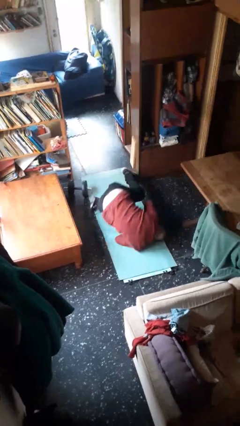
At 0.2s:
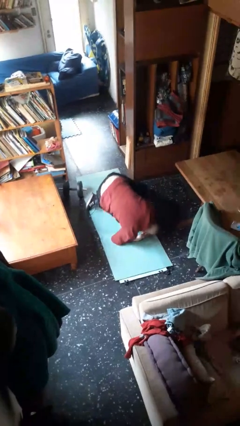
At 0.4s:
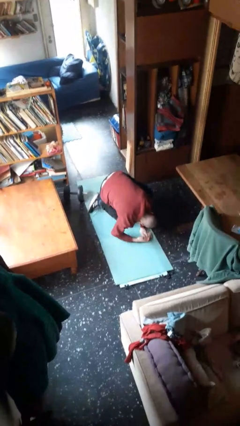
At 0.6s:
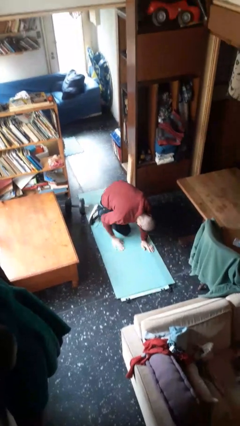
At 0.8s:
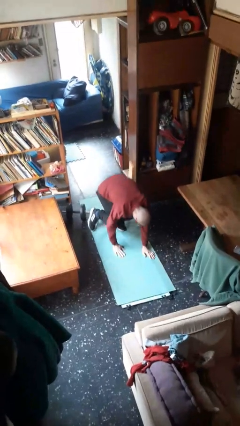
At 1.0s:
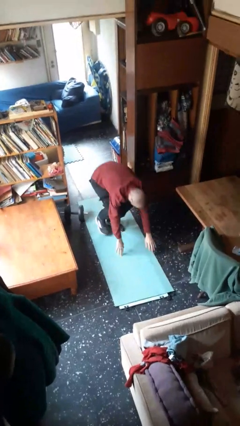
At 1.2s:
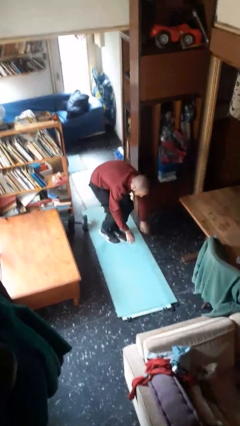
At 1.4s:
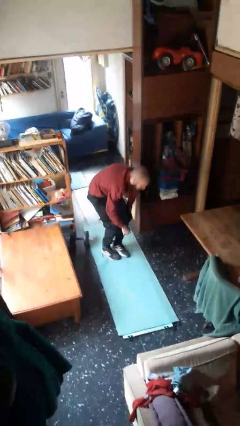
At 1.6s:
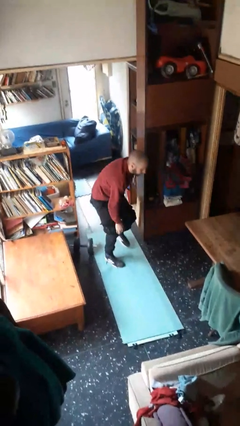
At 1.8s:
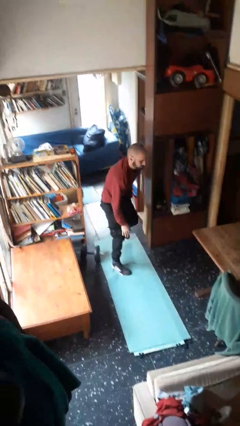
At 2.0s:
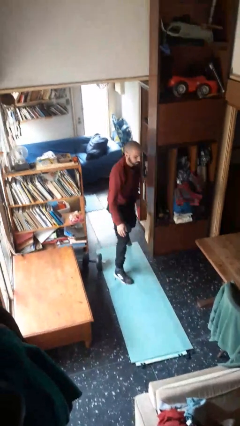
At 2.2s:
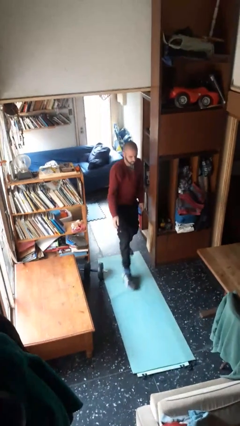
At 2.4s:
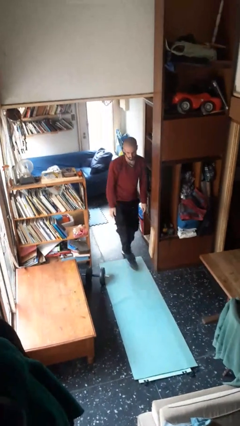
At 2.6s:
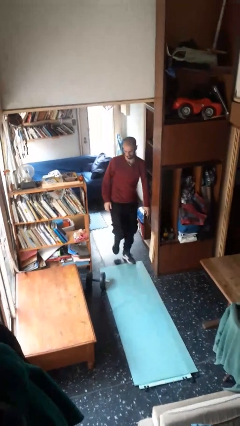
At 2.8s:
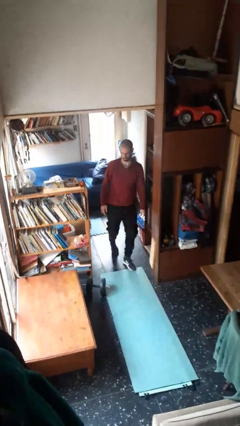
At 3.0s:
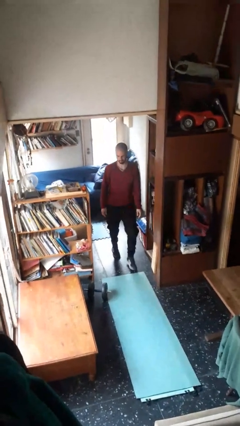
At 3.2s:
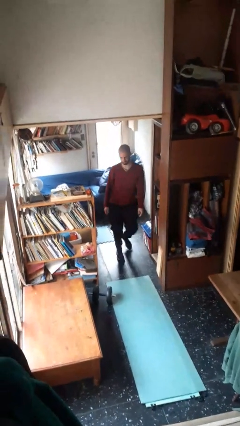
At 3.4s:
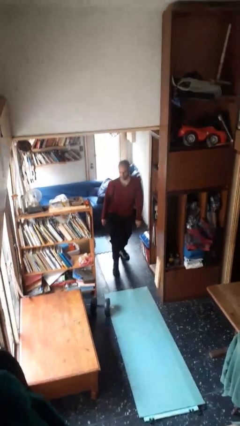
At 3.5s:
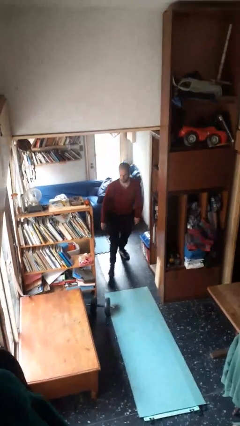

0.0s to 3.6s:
person stands up from floor

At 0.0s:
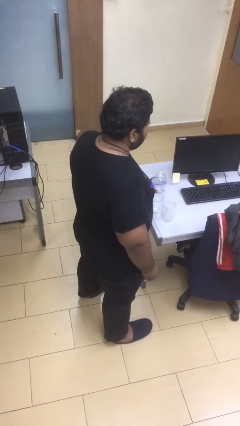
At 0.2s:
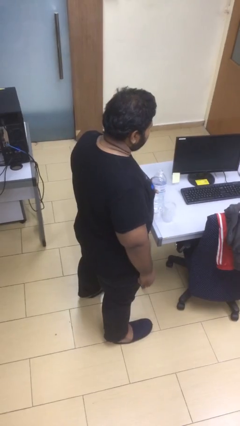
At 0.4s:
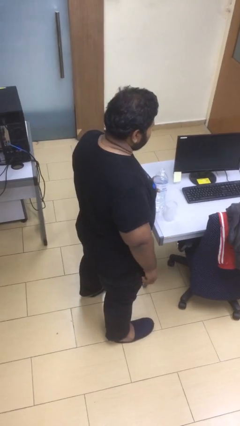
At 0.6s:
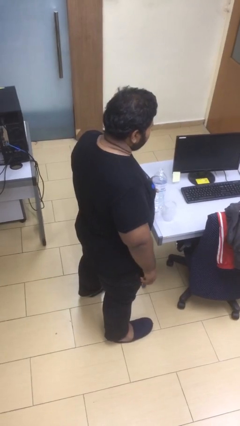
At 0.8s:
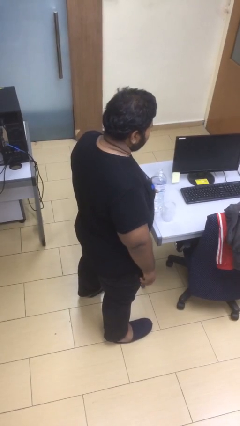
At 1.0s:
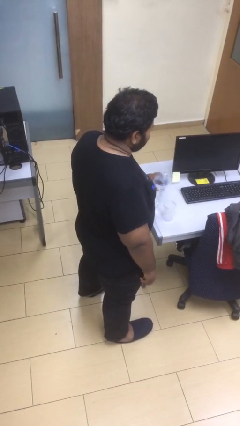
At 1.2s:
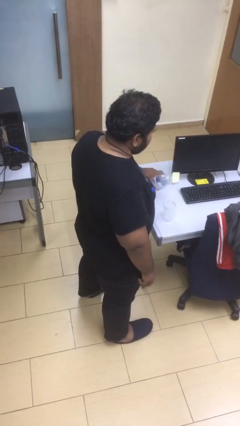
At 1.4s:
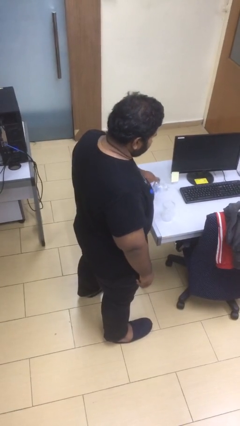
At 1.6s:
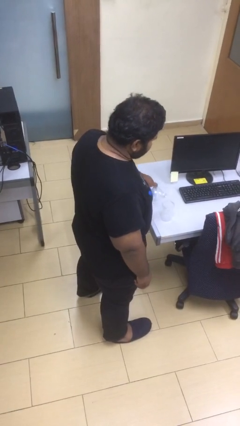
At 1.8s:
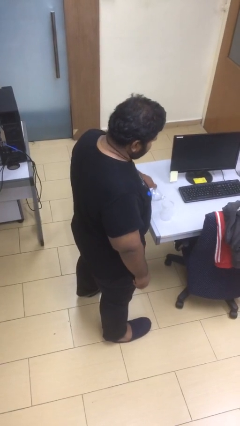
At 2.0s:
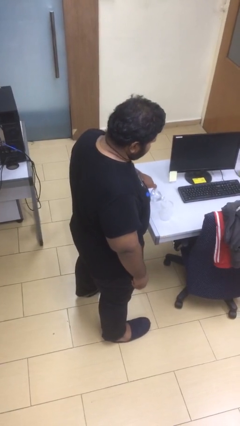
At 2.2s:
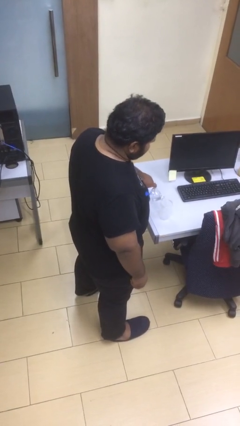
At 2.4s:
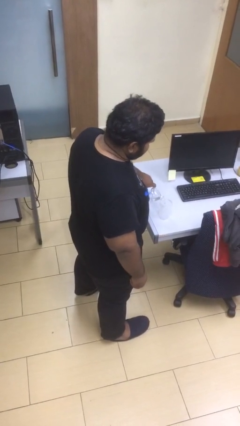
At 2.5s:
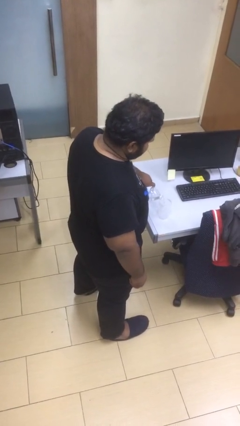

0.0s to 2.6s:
person pours liquid into cup

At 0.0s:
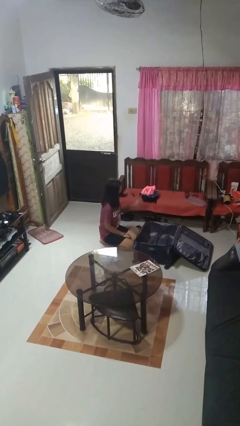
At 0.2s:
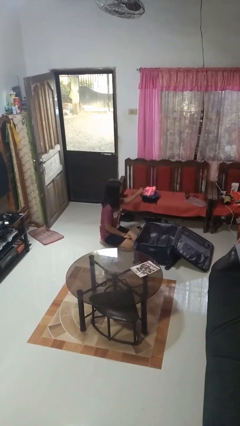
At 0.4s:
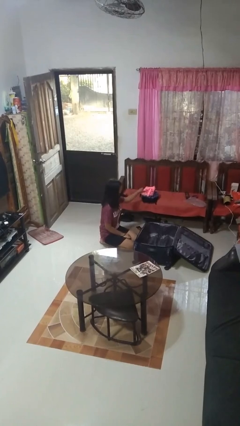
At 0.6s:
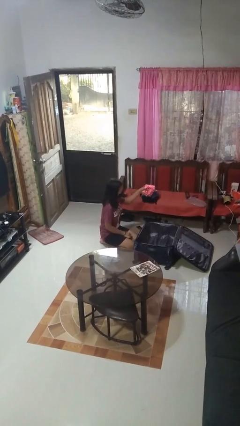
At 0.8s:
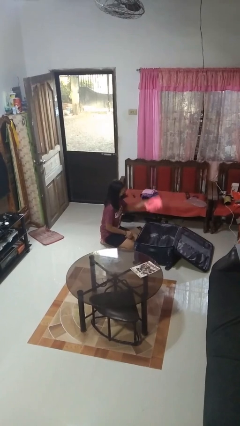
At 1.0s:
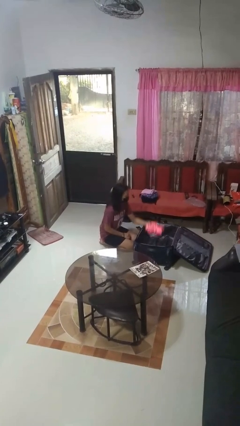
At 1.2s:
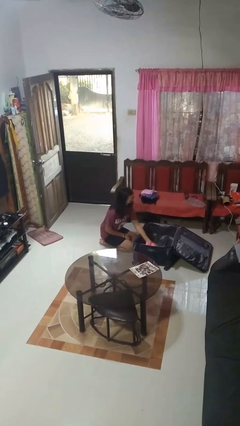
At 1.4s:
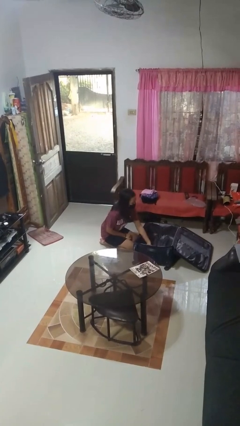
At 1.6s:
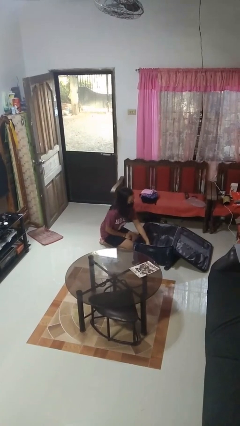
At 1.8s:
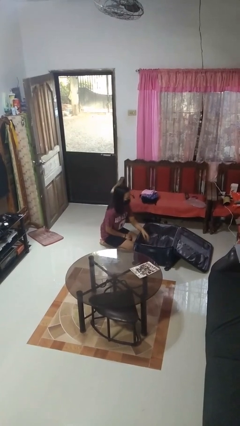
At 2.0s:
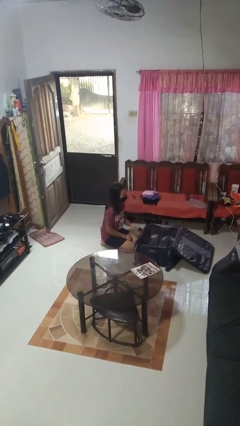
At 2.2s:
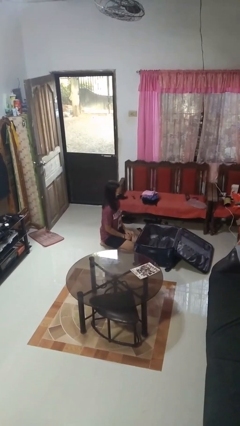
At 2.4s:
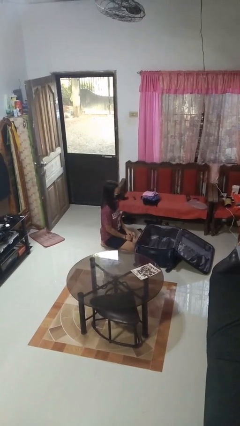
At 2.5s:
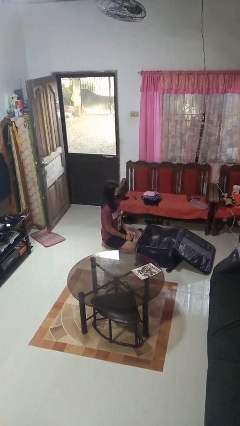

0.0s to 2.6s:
person loads clothes into suitcase

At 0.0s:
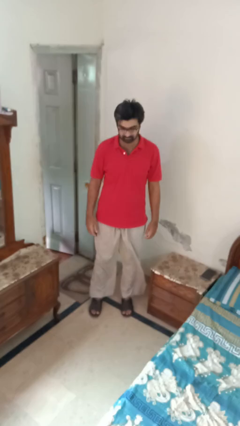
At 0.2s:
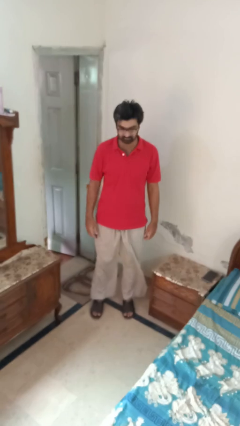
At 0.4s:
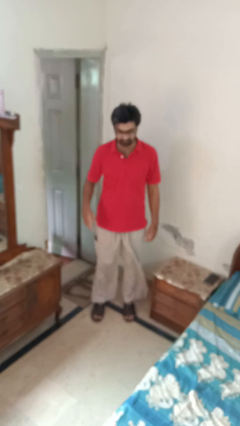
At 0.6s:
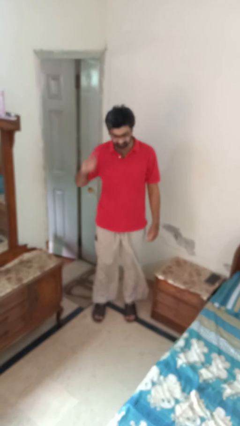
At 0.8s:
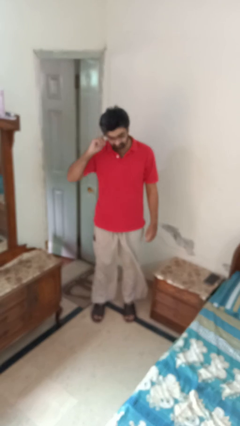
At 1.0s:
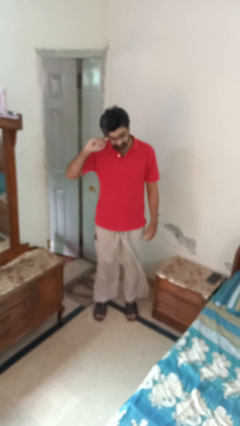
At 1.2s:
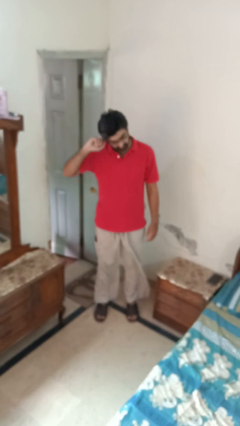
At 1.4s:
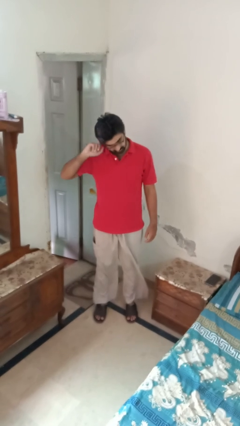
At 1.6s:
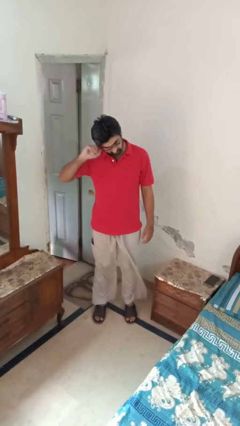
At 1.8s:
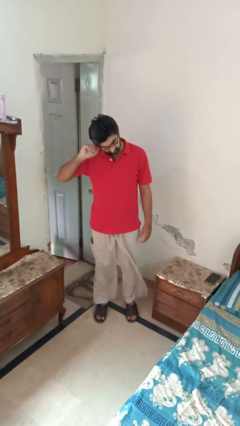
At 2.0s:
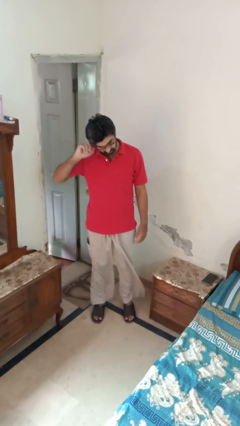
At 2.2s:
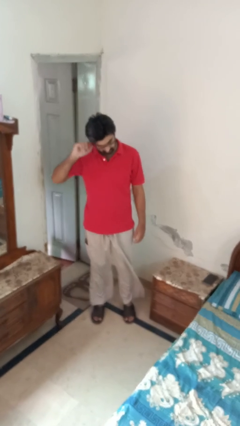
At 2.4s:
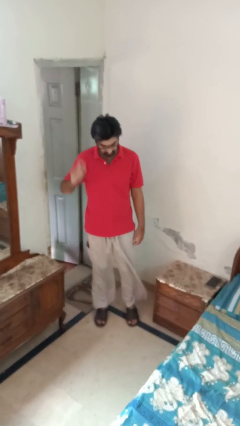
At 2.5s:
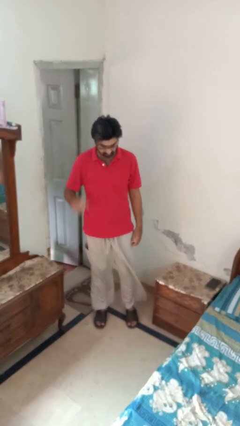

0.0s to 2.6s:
person touches earlobe

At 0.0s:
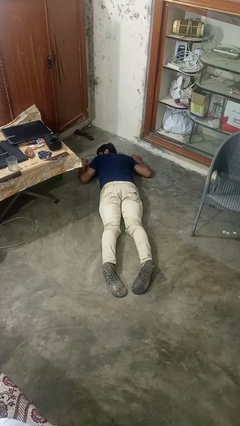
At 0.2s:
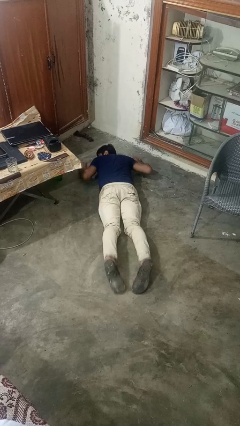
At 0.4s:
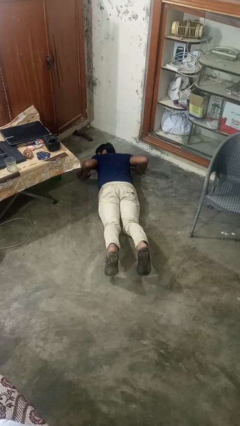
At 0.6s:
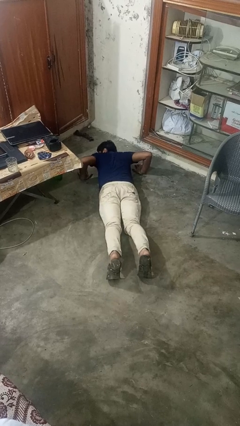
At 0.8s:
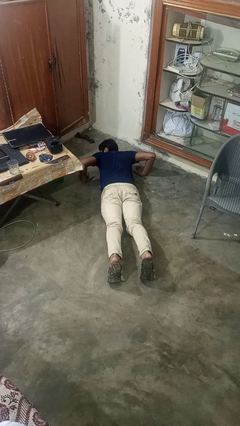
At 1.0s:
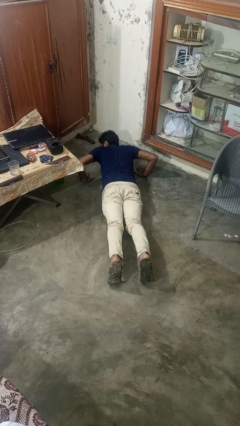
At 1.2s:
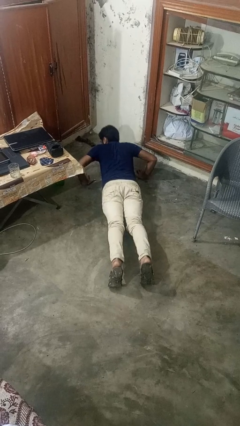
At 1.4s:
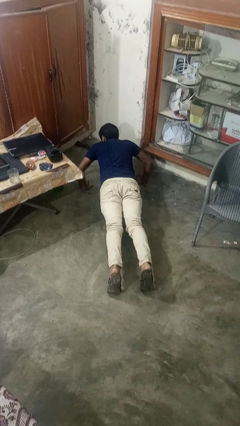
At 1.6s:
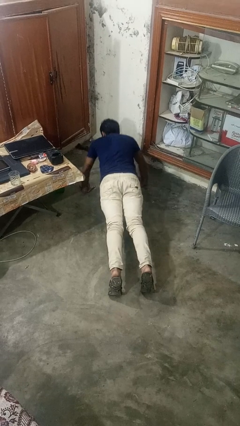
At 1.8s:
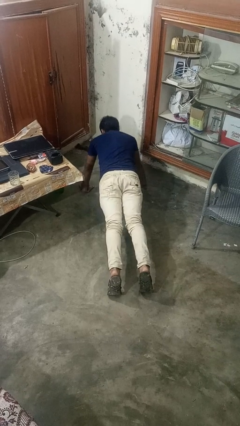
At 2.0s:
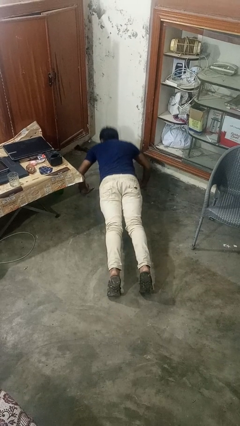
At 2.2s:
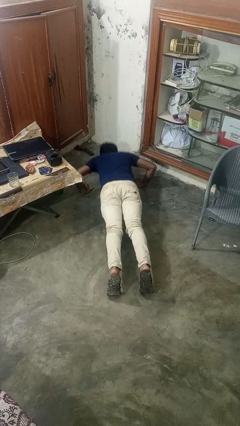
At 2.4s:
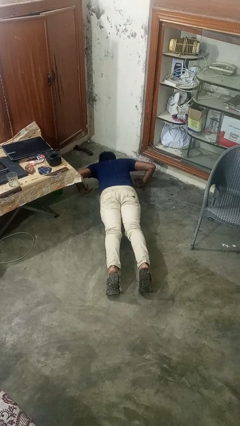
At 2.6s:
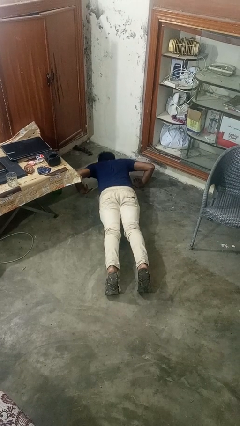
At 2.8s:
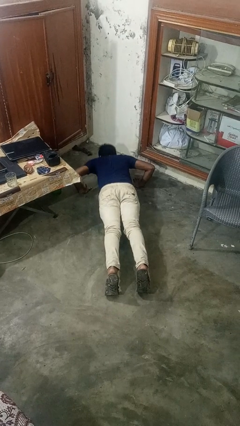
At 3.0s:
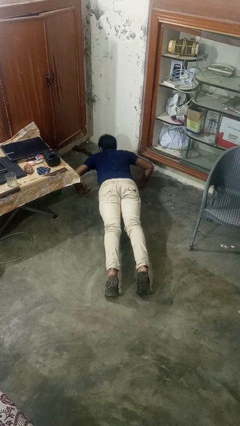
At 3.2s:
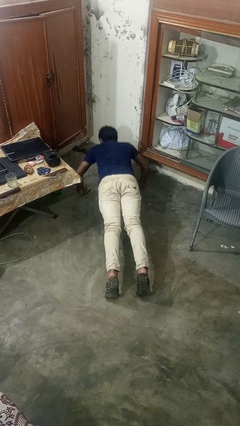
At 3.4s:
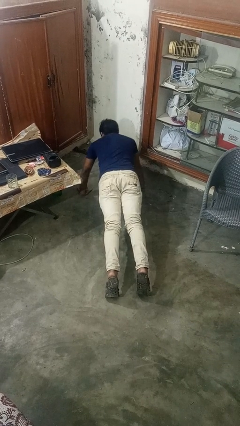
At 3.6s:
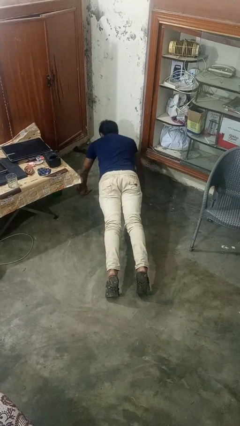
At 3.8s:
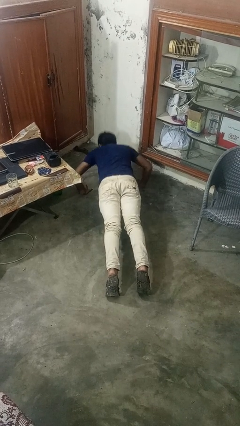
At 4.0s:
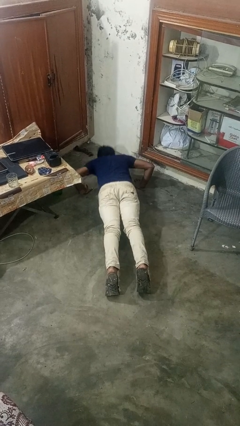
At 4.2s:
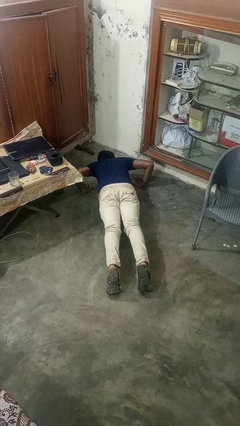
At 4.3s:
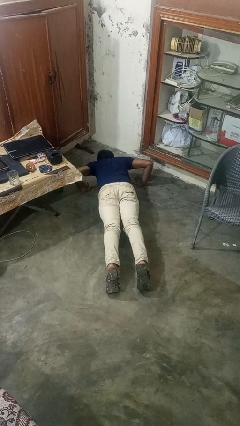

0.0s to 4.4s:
person exercises with pushup

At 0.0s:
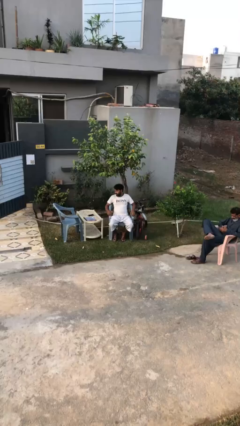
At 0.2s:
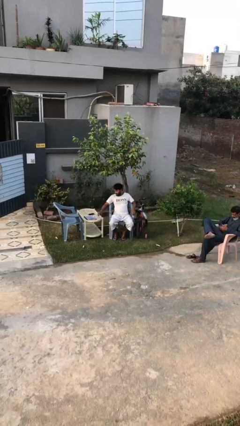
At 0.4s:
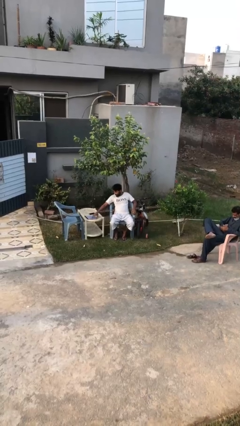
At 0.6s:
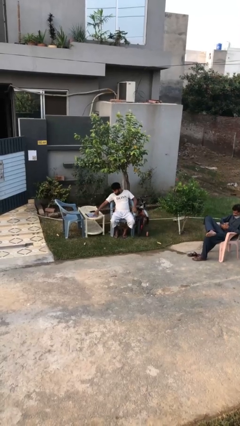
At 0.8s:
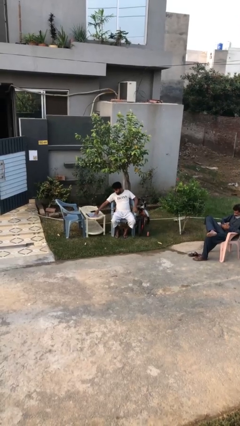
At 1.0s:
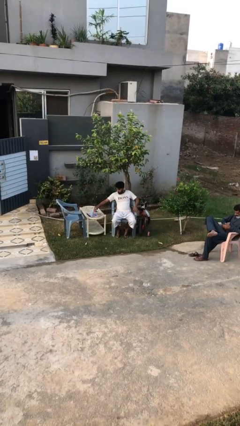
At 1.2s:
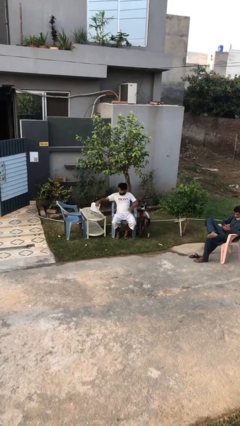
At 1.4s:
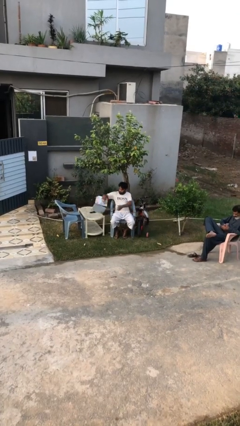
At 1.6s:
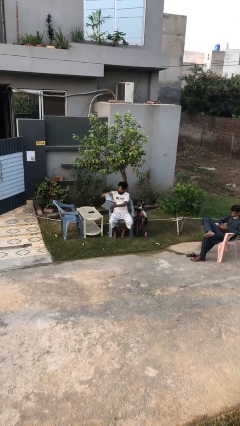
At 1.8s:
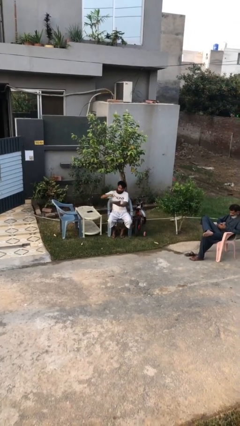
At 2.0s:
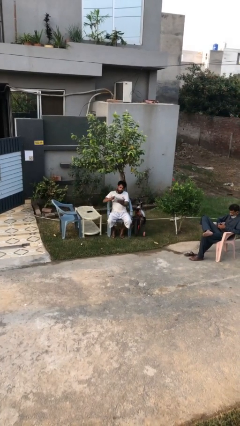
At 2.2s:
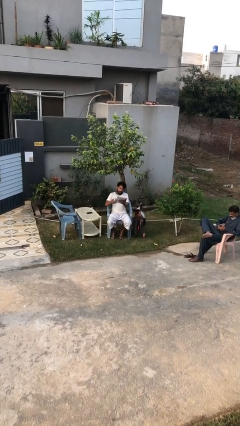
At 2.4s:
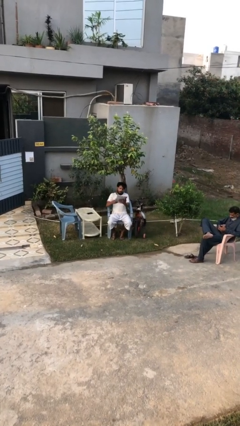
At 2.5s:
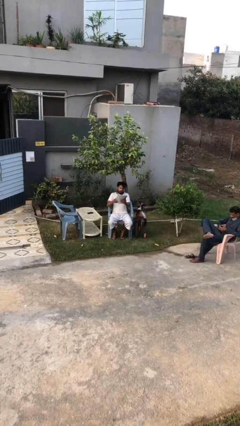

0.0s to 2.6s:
person picks up object from table
